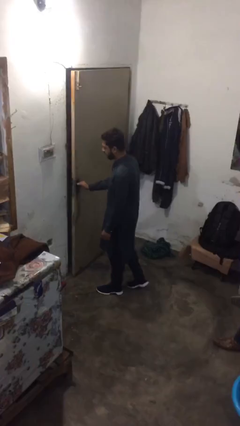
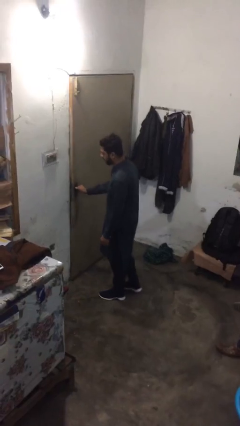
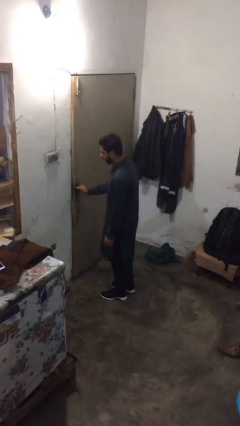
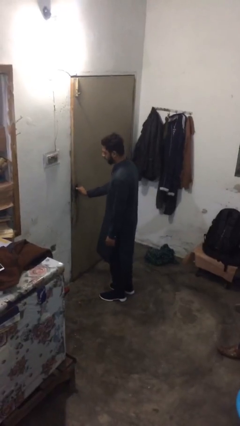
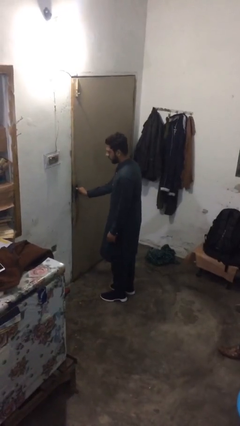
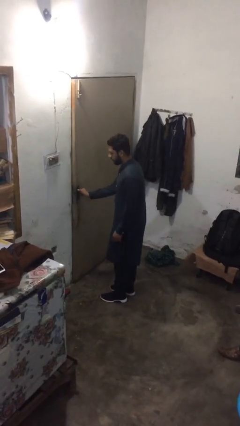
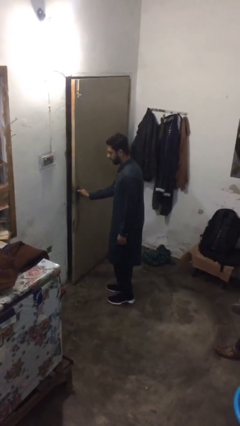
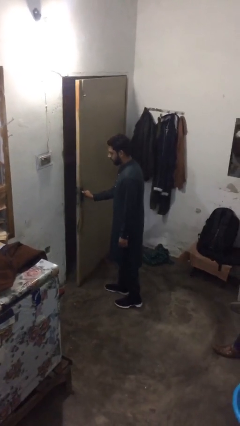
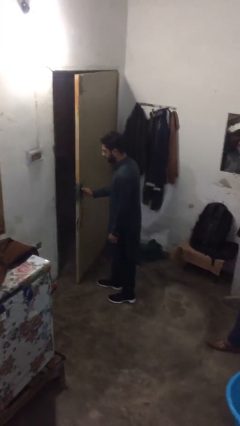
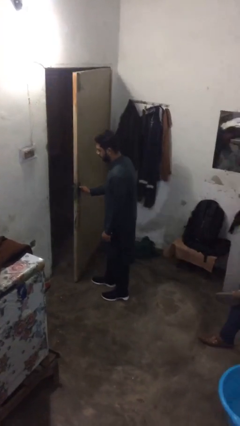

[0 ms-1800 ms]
person opens facility door

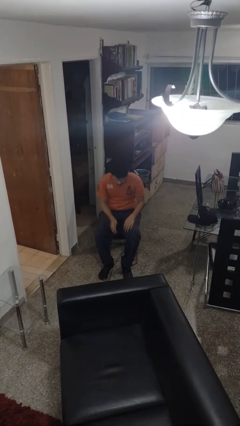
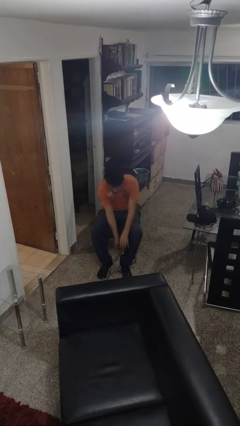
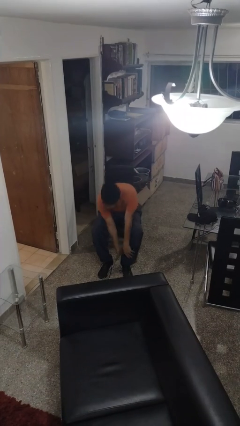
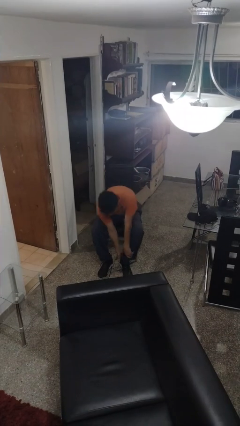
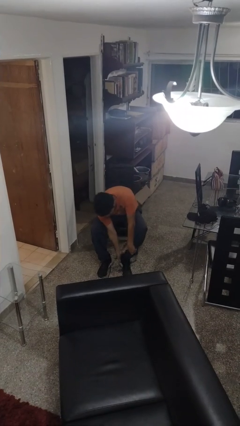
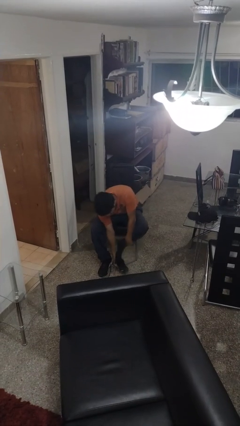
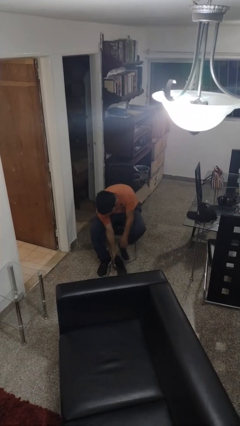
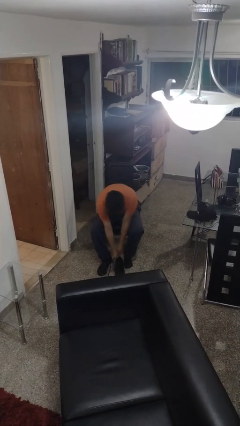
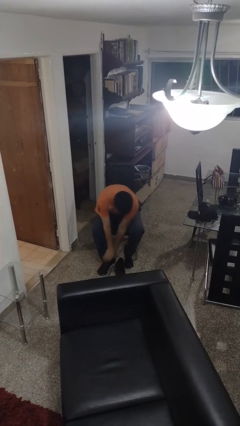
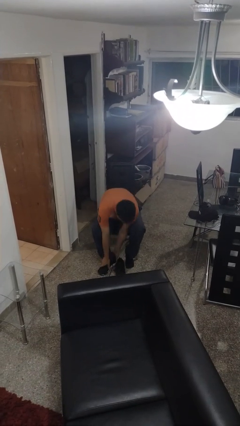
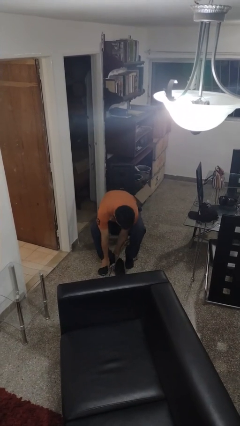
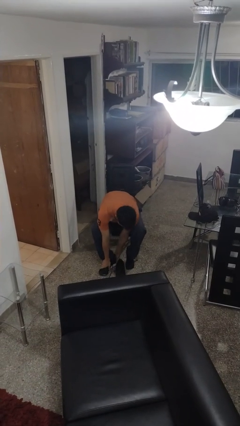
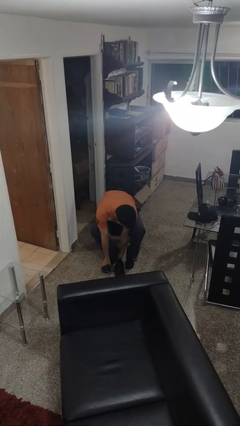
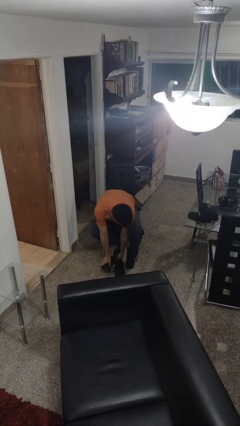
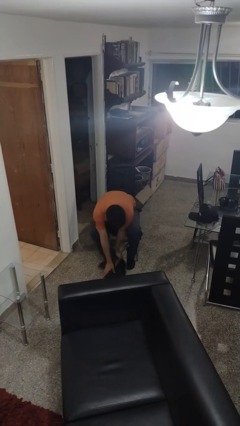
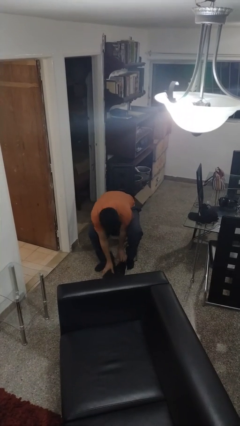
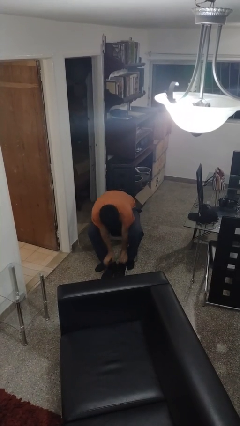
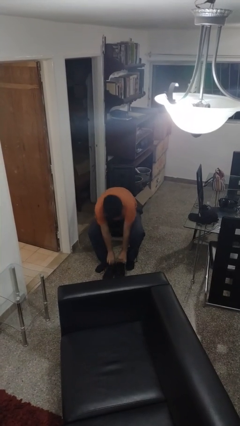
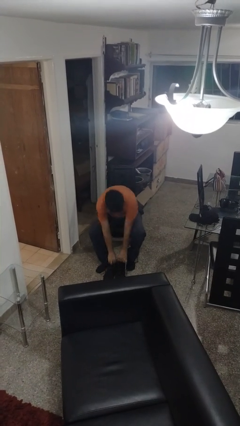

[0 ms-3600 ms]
person takes off shoes

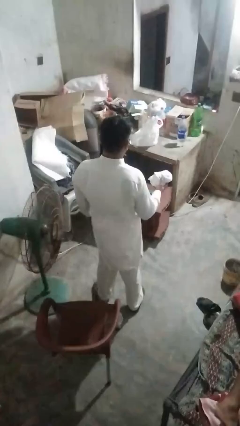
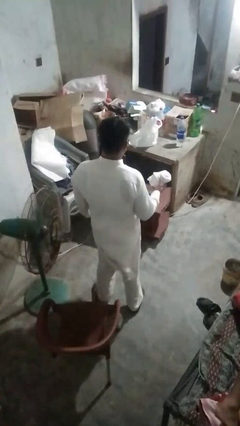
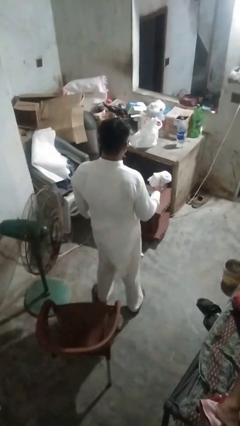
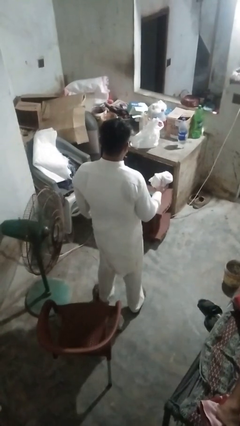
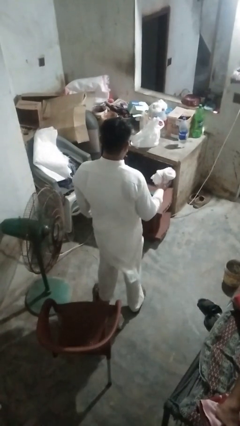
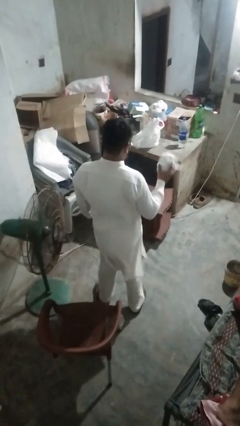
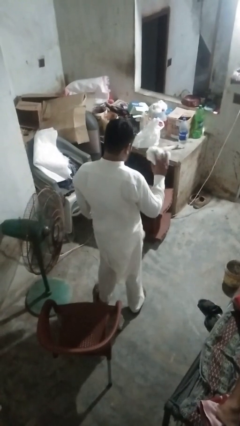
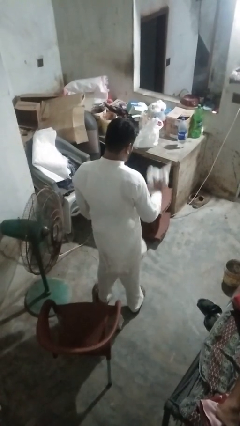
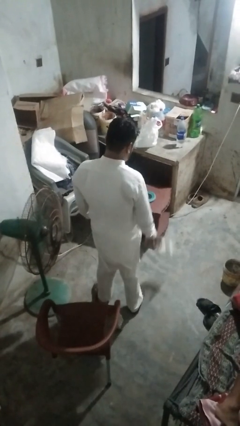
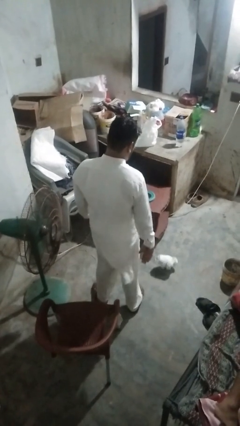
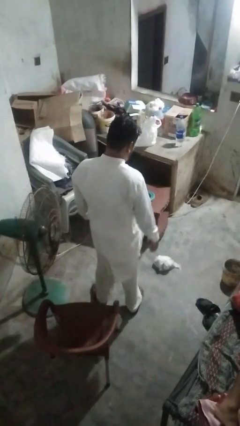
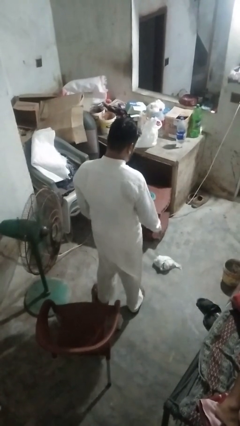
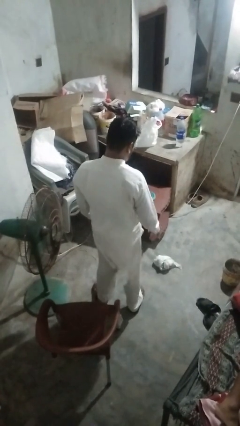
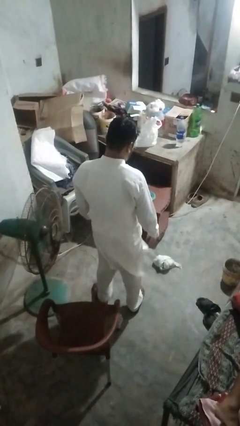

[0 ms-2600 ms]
person throws object to ground

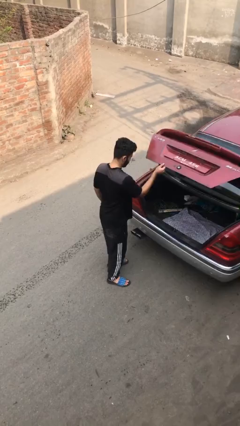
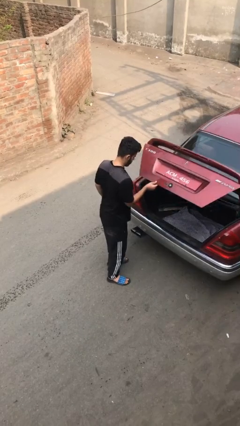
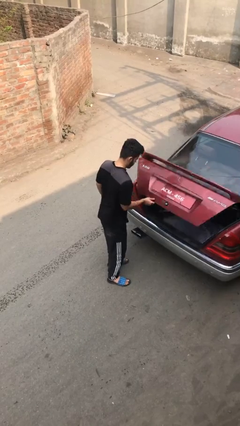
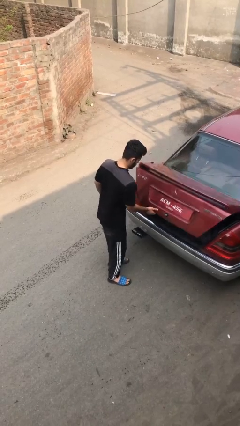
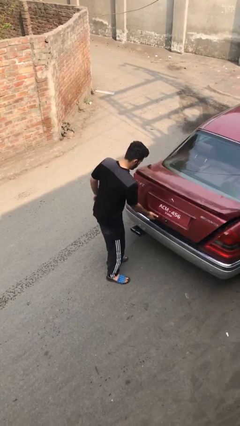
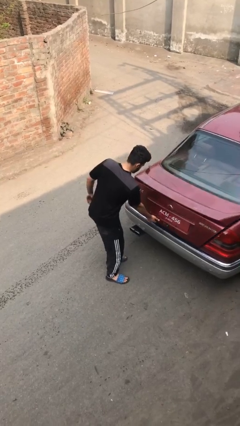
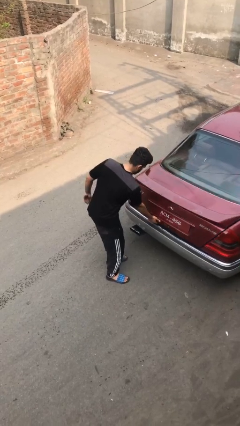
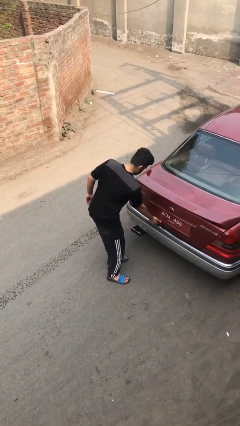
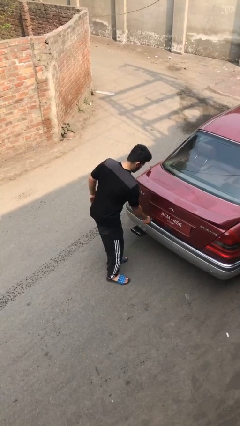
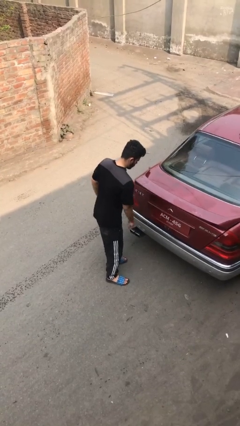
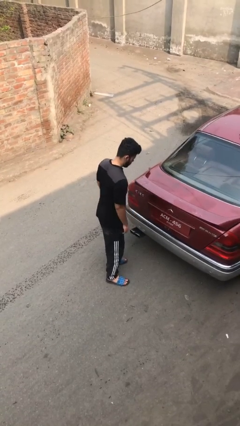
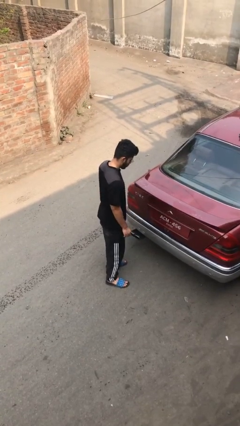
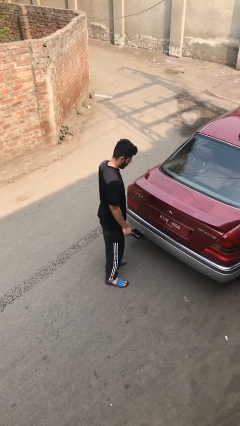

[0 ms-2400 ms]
person closes car trunk

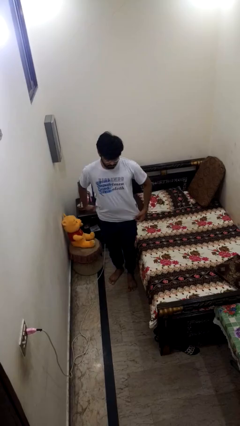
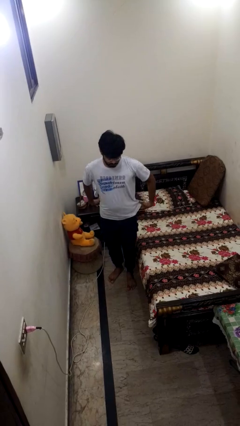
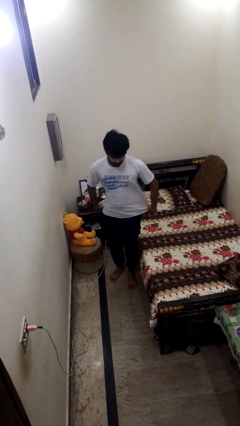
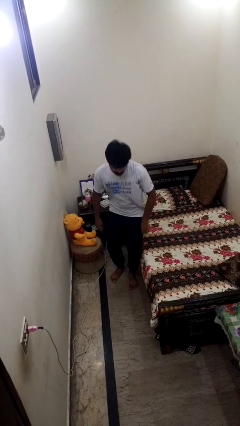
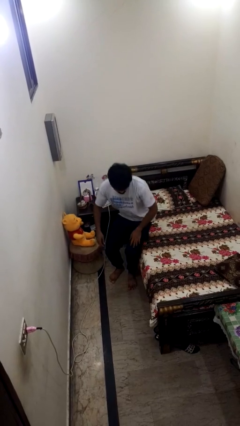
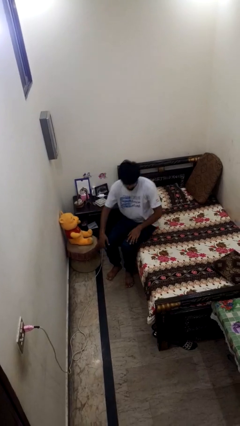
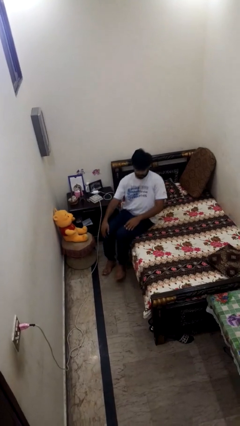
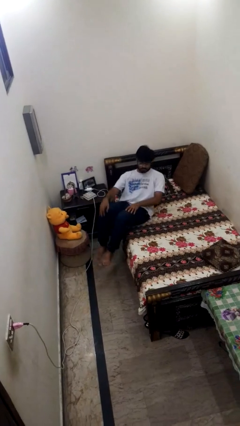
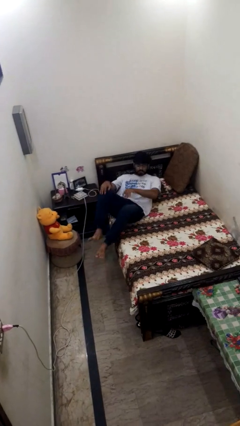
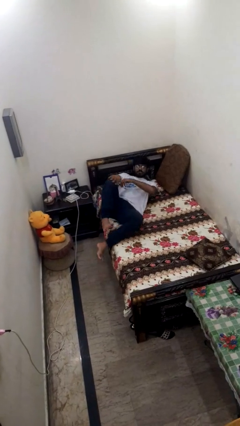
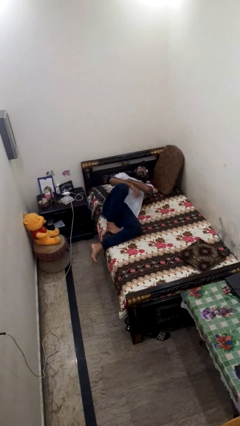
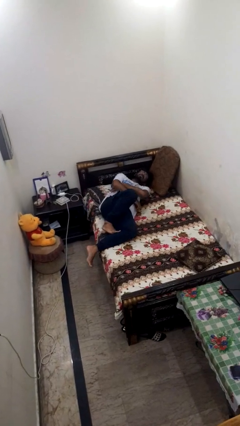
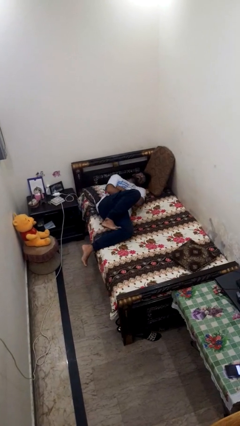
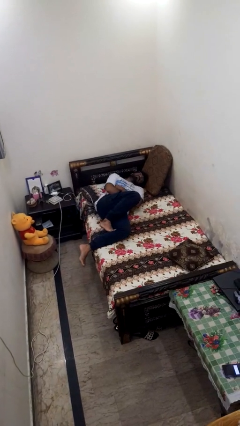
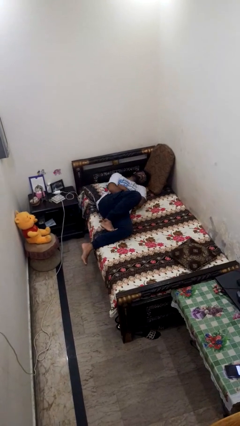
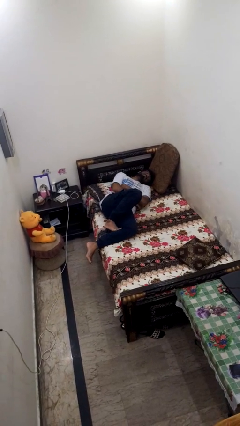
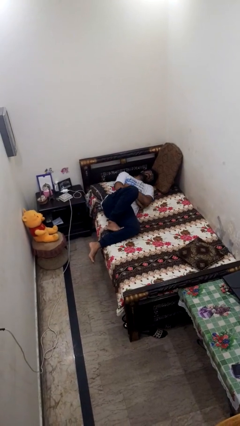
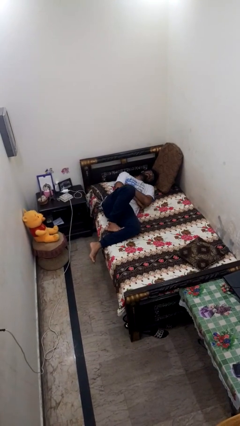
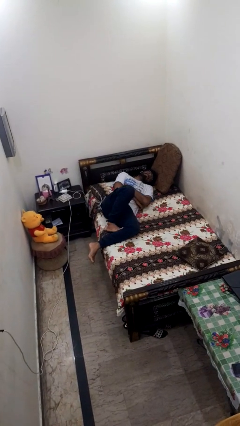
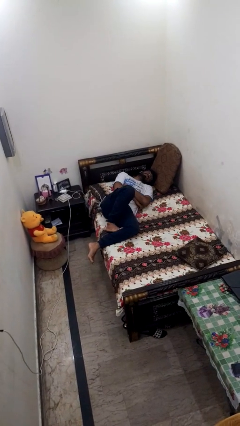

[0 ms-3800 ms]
person lies down on bed

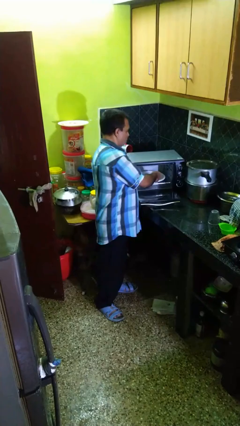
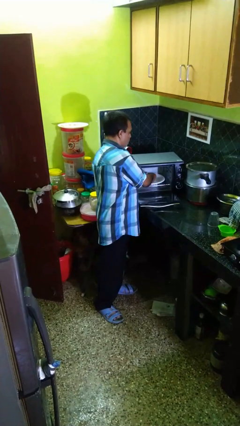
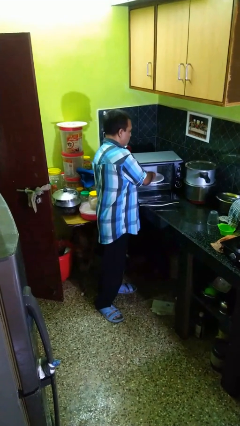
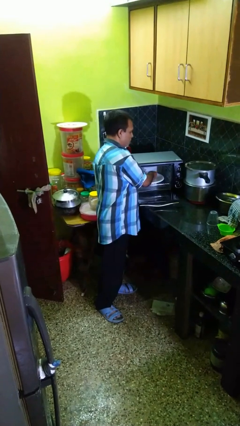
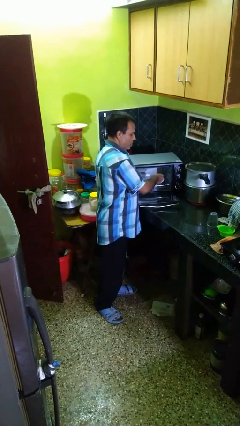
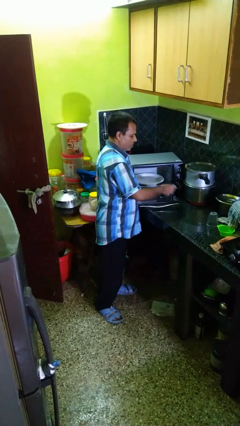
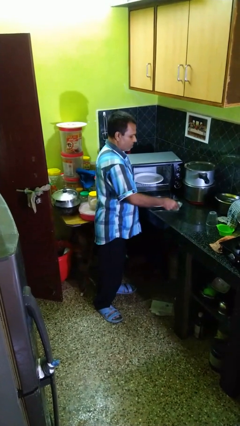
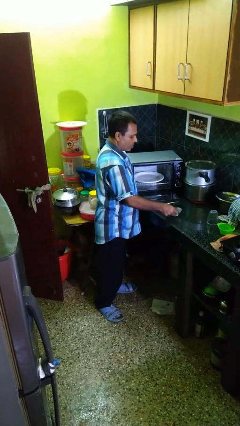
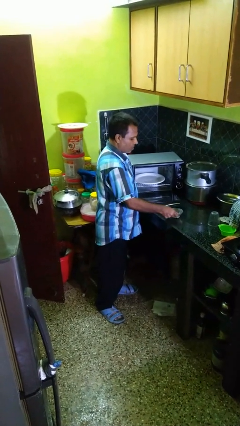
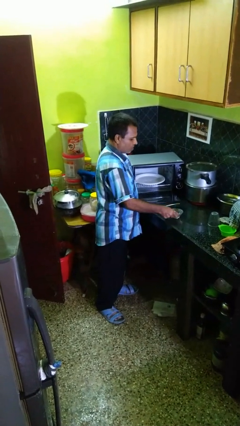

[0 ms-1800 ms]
person takes object from microwave

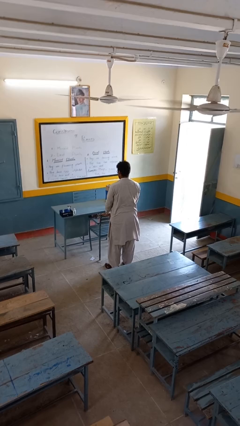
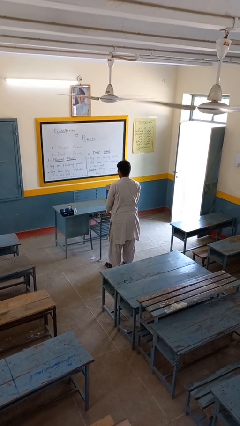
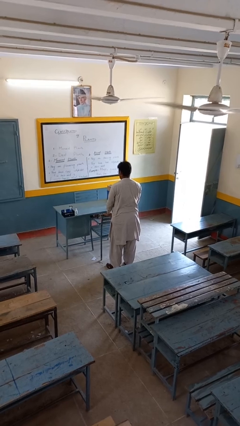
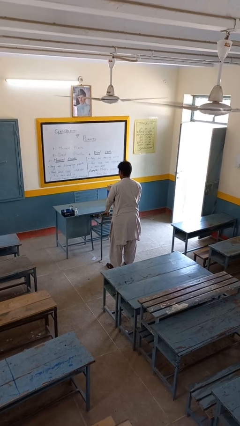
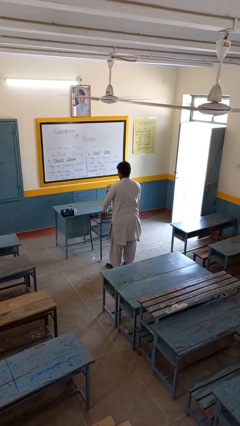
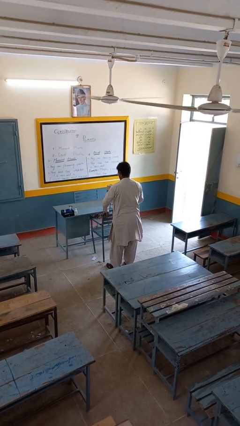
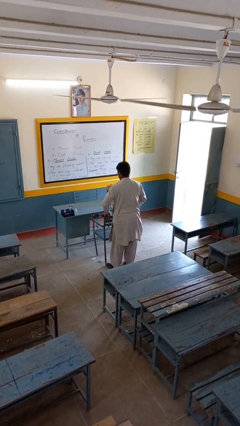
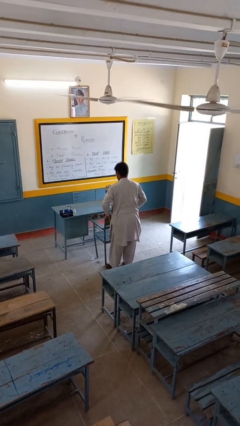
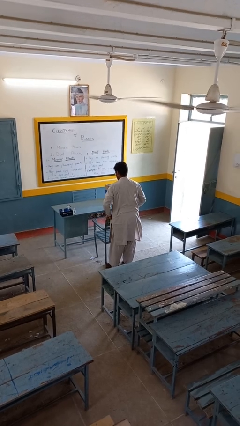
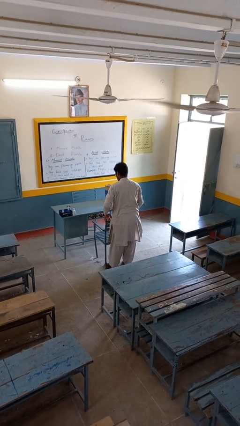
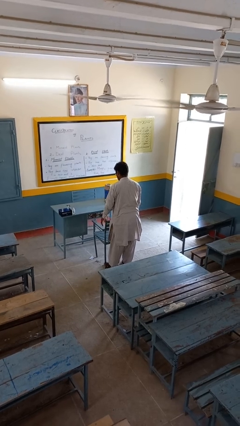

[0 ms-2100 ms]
person pulls out chair
